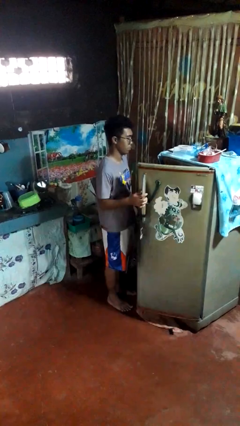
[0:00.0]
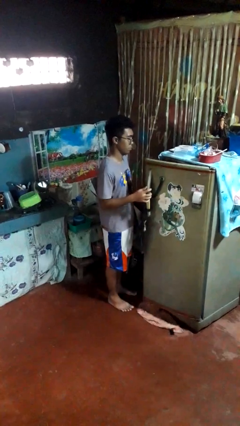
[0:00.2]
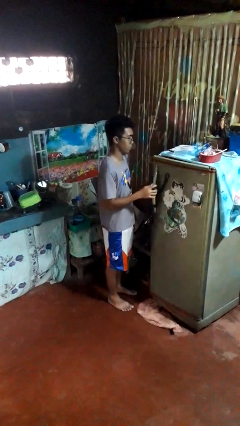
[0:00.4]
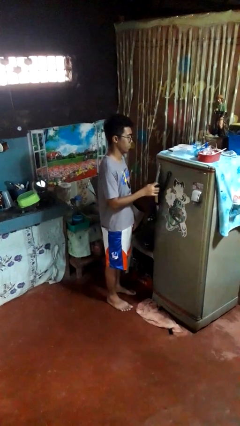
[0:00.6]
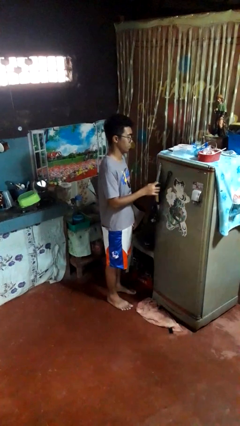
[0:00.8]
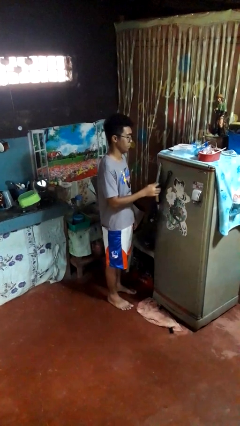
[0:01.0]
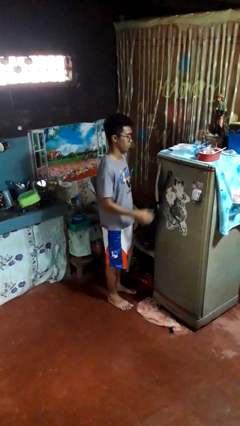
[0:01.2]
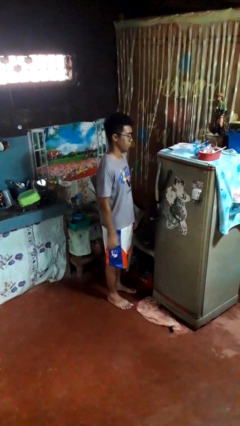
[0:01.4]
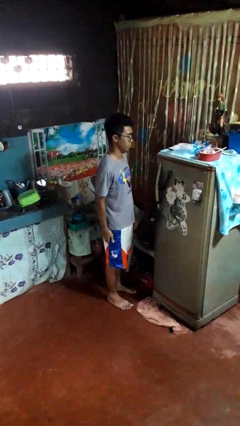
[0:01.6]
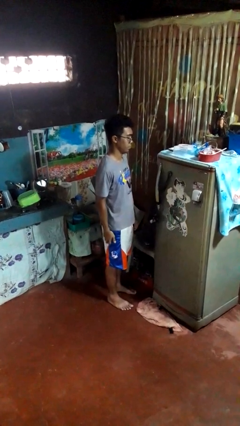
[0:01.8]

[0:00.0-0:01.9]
person closes refrigerator

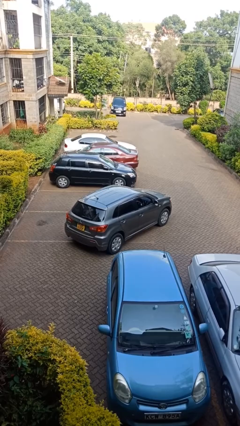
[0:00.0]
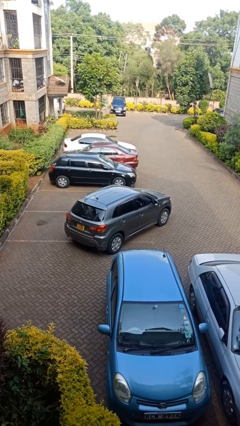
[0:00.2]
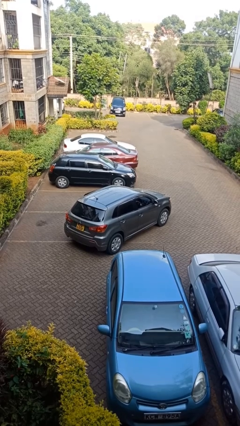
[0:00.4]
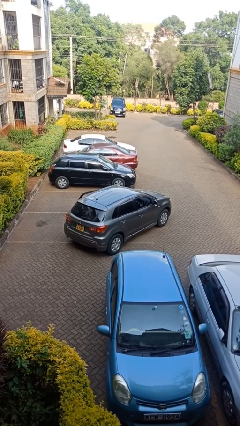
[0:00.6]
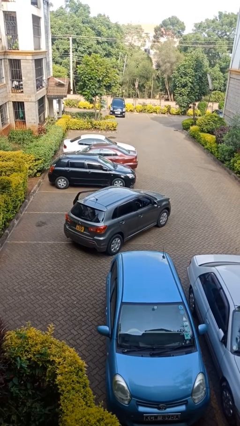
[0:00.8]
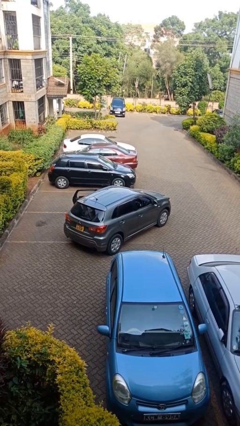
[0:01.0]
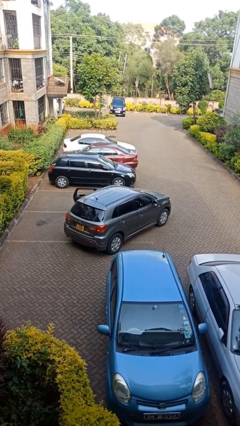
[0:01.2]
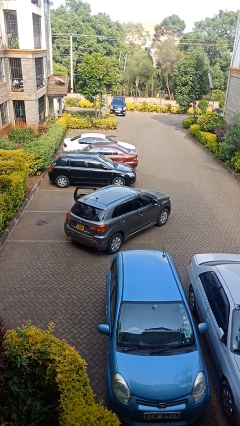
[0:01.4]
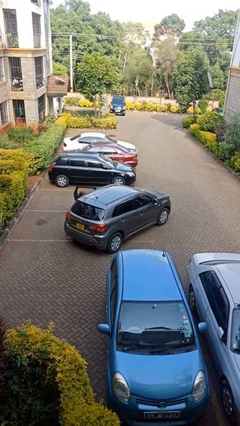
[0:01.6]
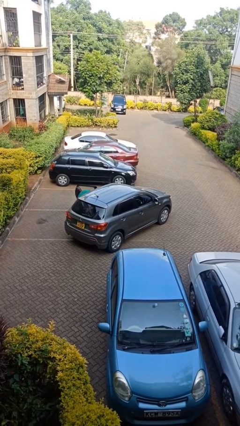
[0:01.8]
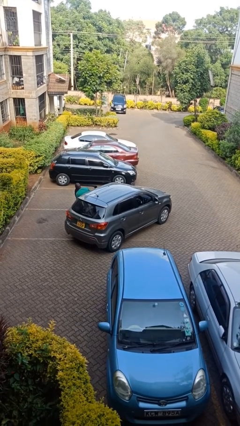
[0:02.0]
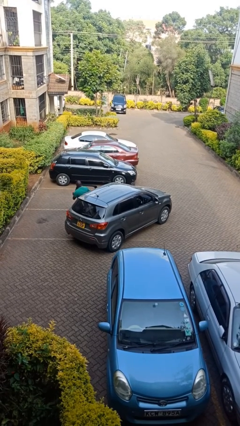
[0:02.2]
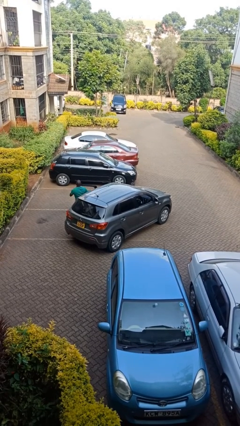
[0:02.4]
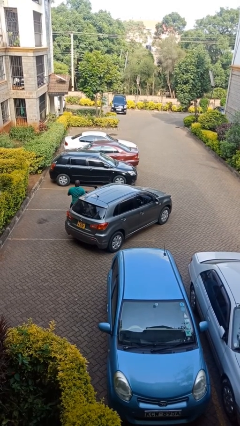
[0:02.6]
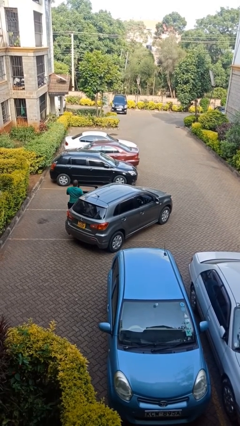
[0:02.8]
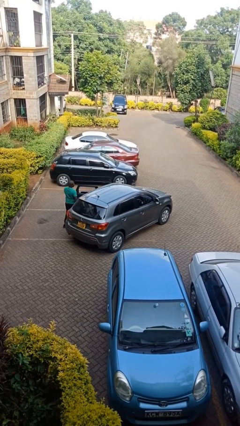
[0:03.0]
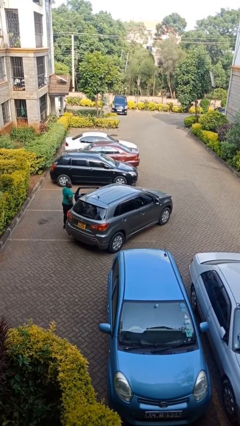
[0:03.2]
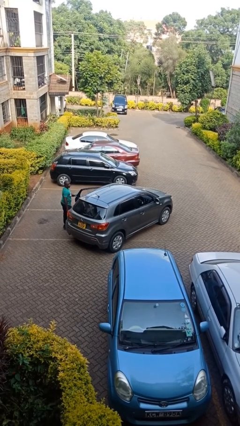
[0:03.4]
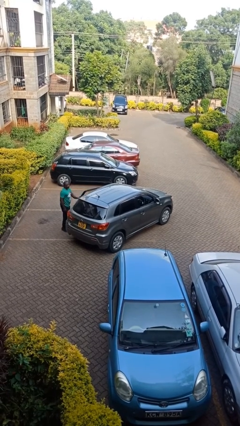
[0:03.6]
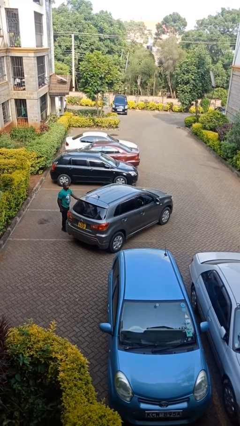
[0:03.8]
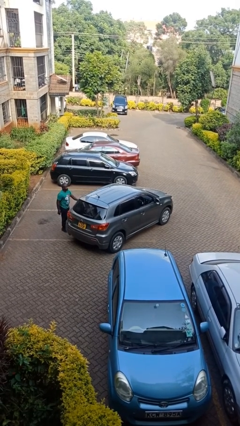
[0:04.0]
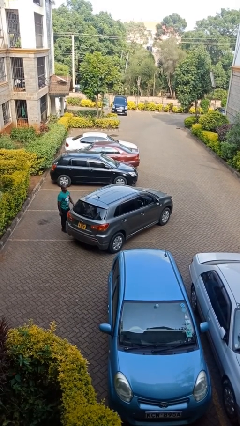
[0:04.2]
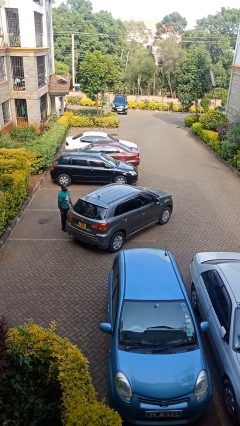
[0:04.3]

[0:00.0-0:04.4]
car drops off person

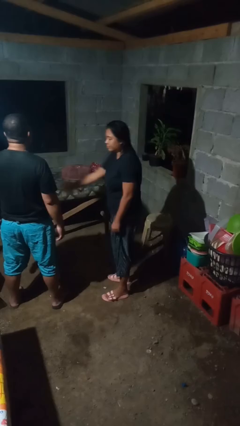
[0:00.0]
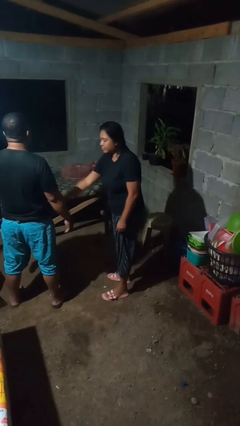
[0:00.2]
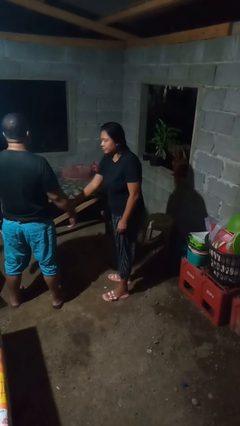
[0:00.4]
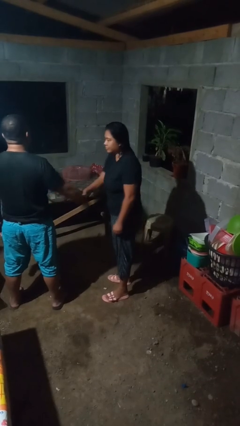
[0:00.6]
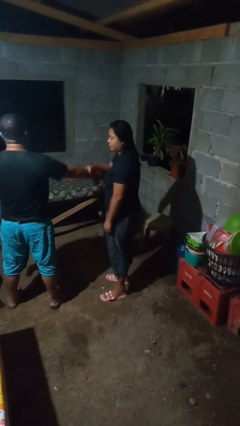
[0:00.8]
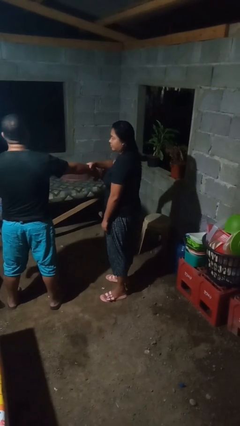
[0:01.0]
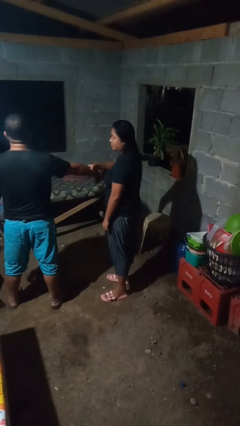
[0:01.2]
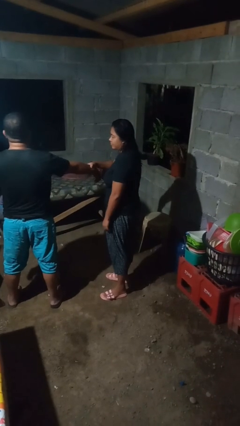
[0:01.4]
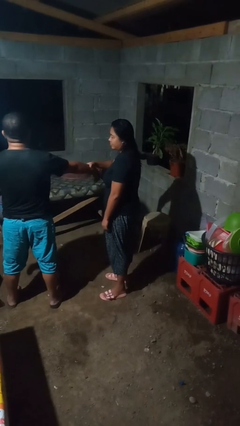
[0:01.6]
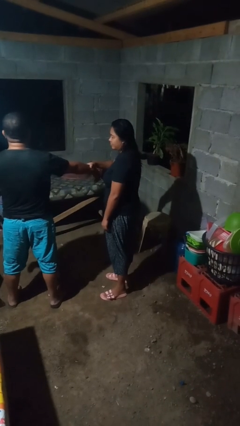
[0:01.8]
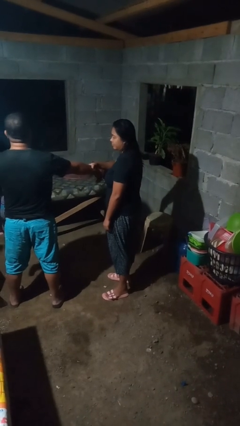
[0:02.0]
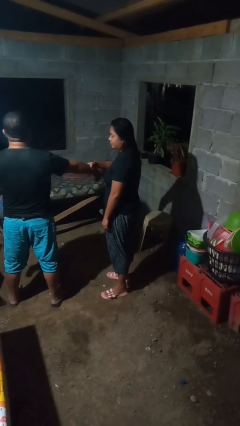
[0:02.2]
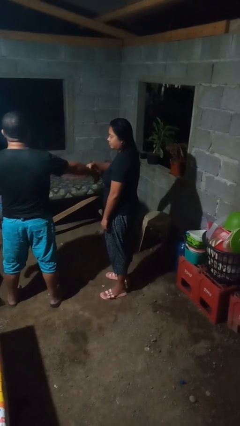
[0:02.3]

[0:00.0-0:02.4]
person grabs person by forearm

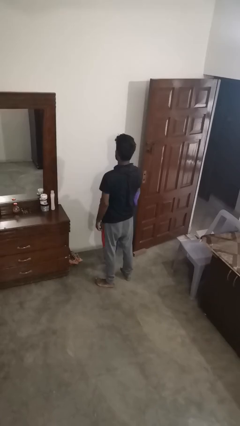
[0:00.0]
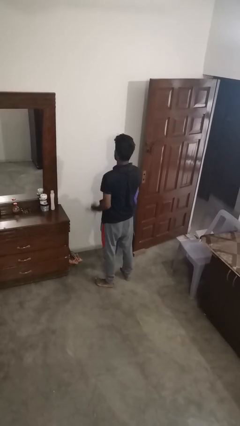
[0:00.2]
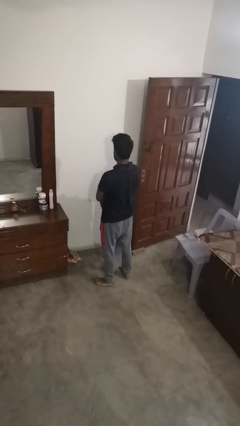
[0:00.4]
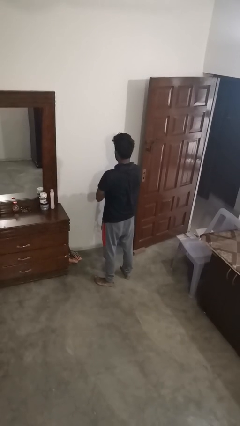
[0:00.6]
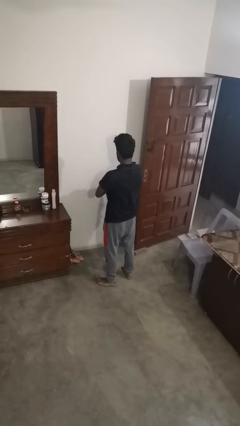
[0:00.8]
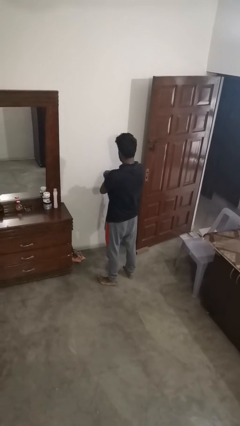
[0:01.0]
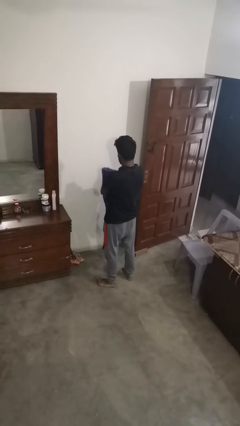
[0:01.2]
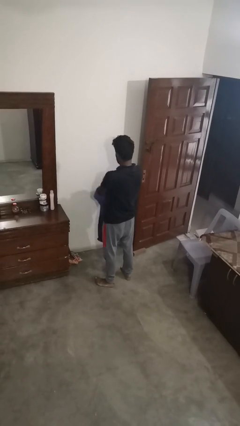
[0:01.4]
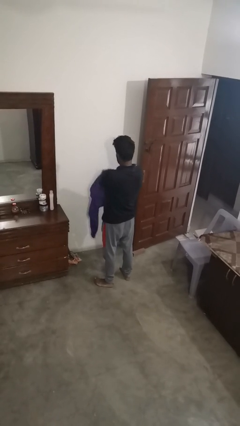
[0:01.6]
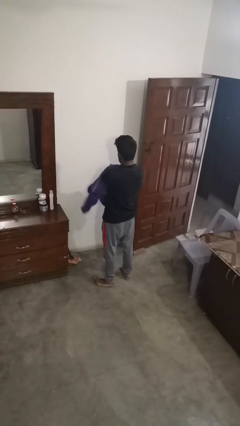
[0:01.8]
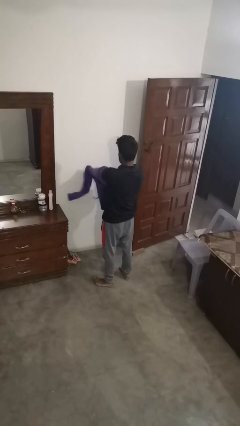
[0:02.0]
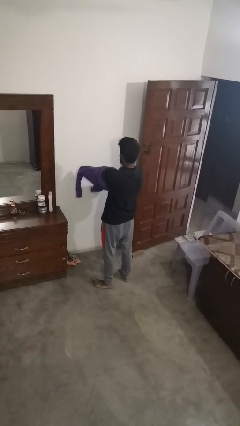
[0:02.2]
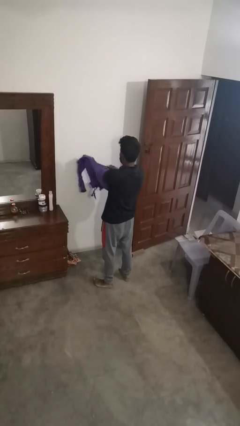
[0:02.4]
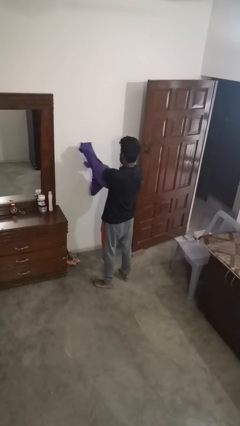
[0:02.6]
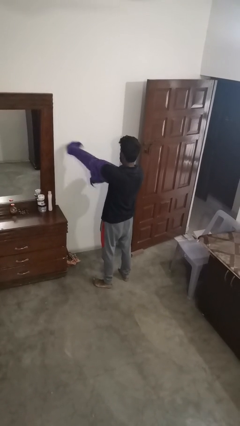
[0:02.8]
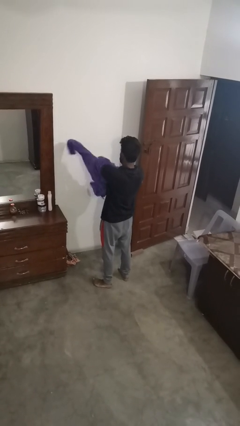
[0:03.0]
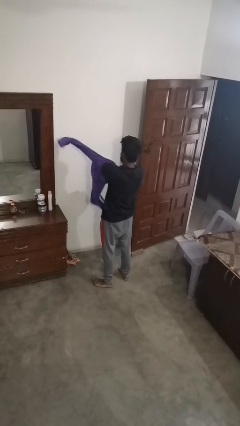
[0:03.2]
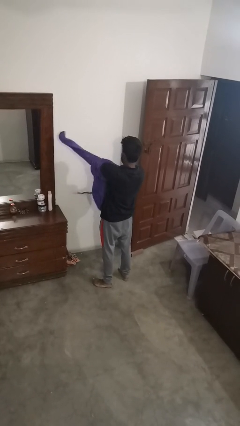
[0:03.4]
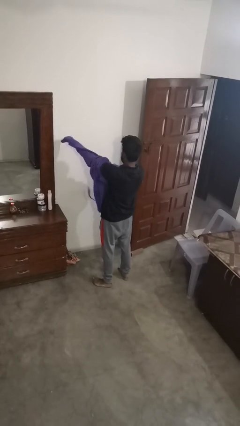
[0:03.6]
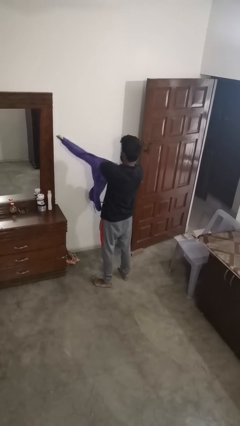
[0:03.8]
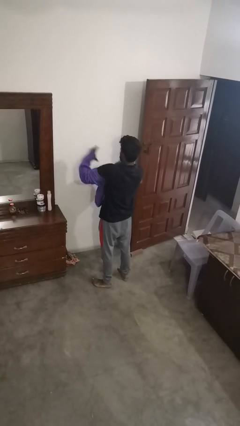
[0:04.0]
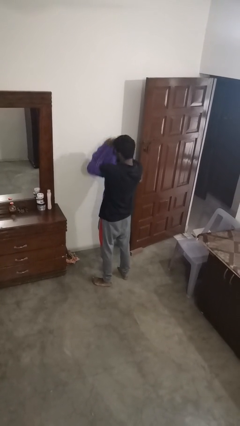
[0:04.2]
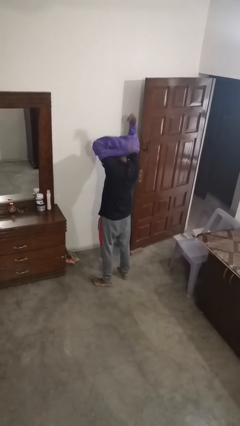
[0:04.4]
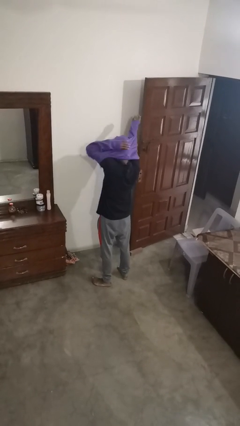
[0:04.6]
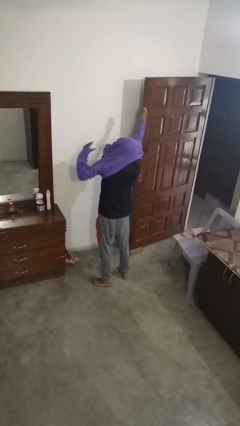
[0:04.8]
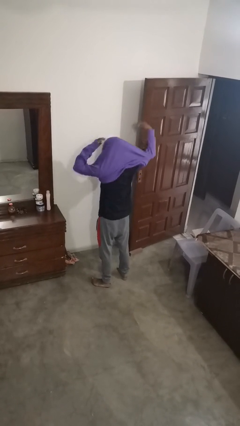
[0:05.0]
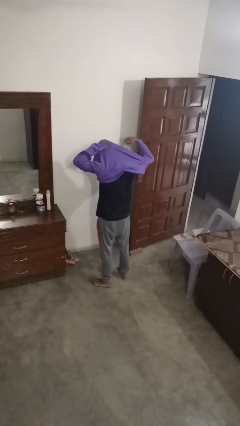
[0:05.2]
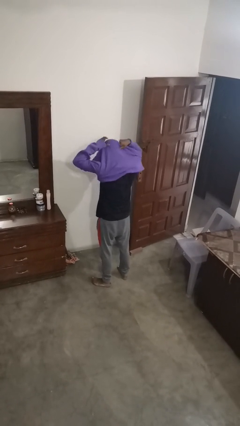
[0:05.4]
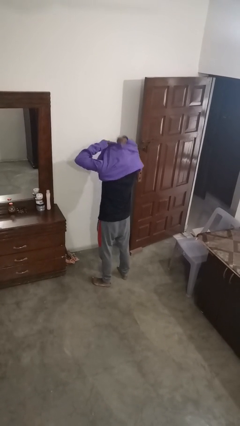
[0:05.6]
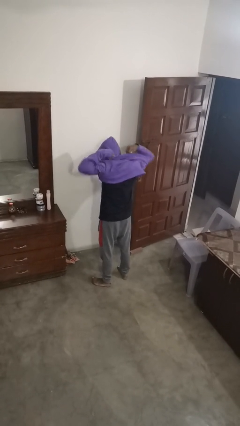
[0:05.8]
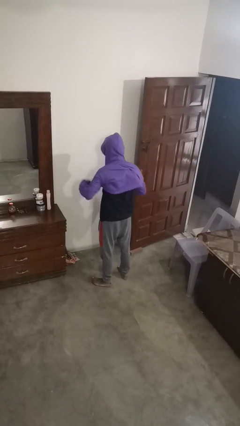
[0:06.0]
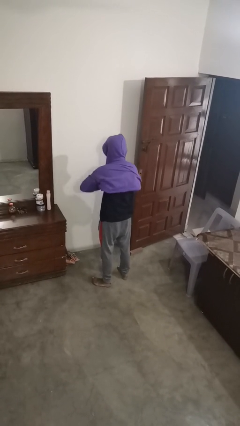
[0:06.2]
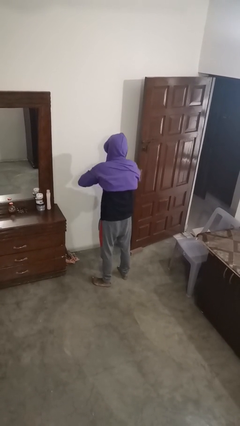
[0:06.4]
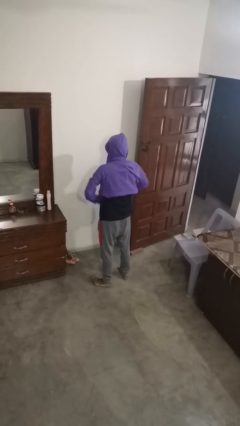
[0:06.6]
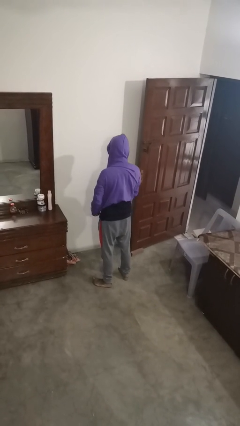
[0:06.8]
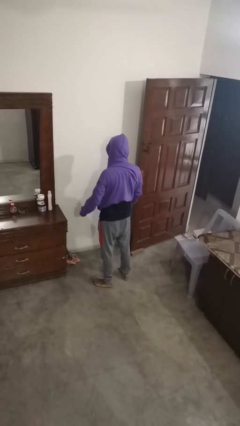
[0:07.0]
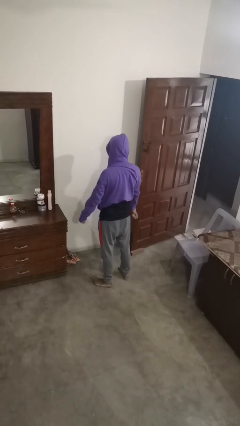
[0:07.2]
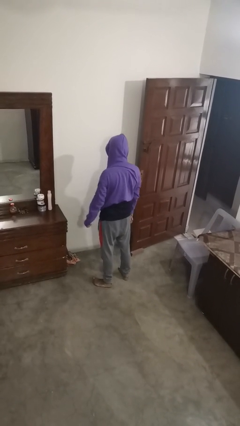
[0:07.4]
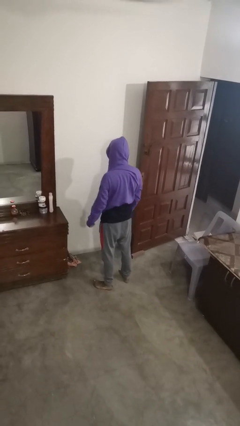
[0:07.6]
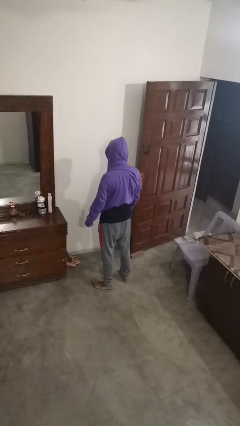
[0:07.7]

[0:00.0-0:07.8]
person puts on hoodie

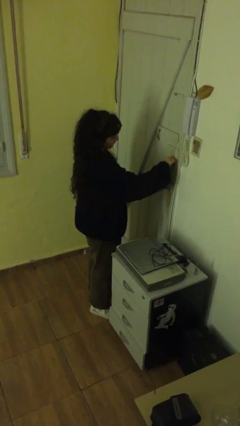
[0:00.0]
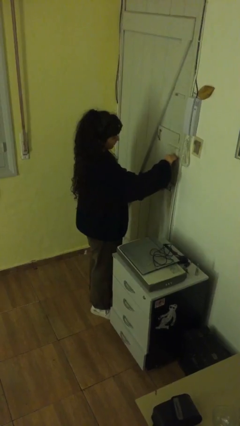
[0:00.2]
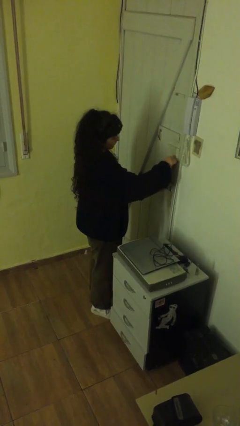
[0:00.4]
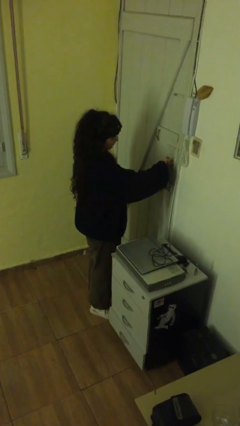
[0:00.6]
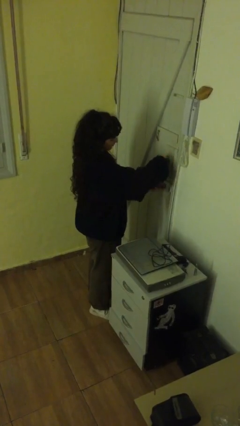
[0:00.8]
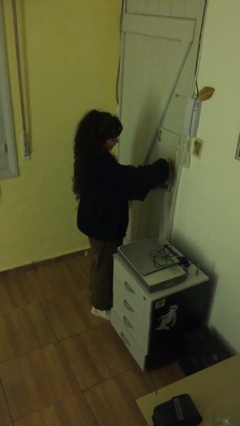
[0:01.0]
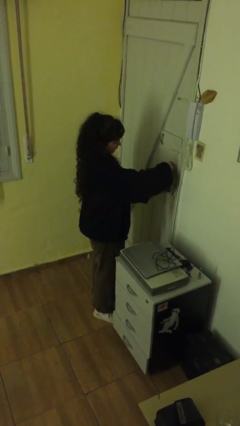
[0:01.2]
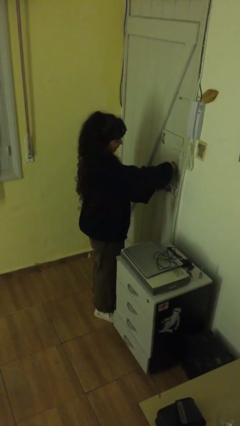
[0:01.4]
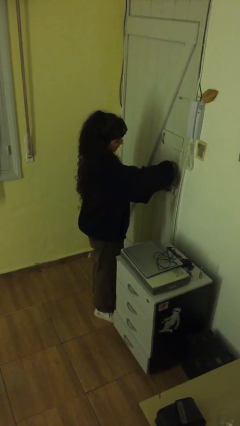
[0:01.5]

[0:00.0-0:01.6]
person unlocks door with keys
